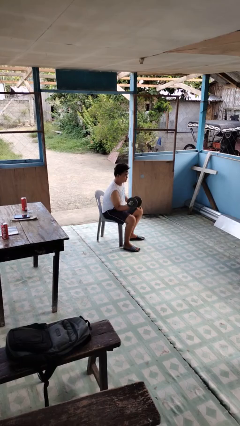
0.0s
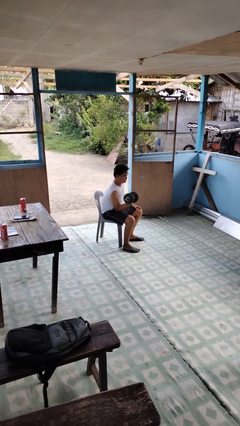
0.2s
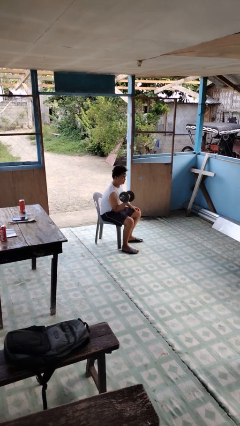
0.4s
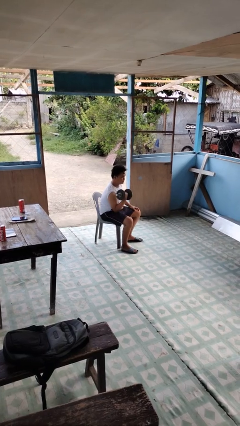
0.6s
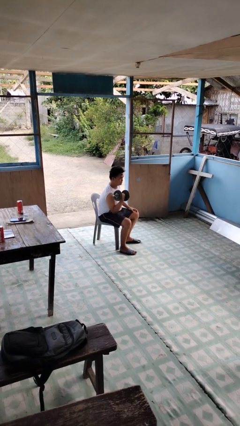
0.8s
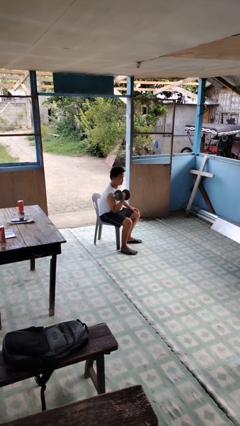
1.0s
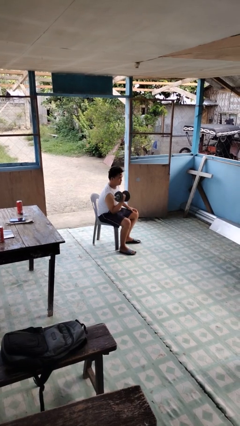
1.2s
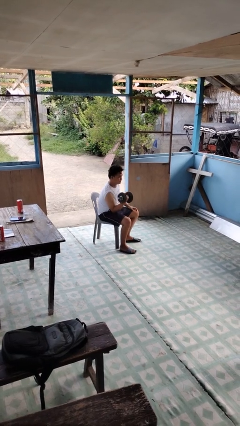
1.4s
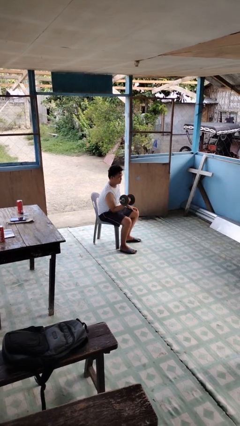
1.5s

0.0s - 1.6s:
person lifts dumbbells

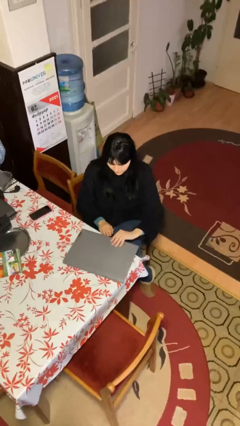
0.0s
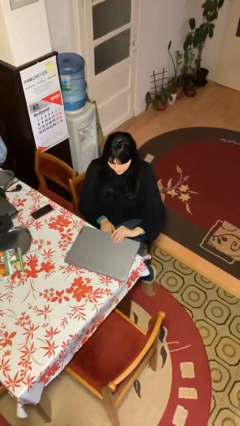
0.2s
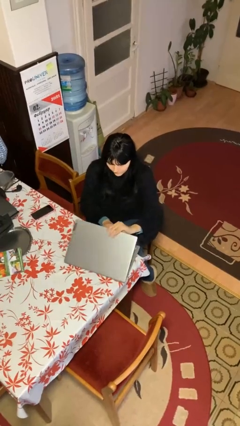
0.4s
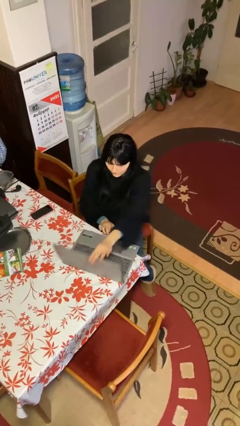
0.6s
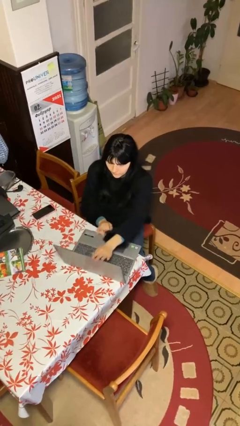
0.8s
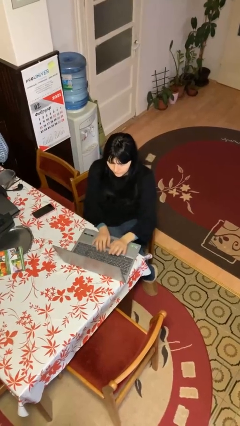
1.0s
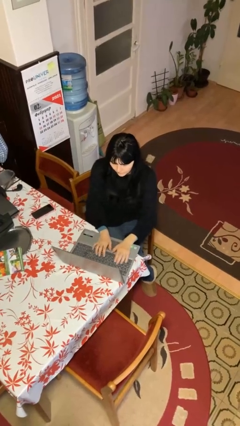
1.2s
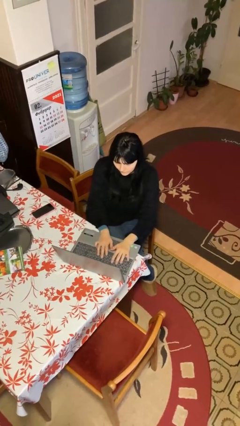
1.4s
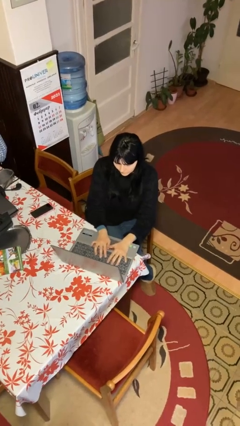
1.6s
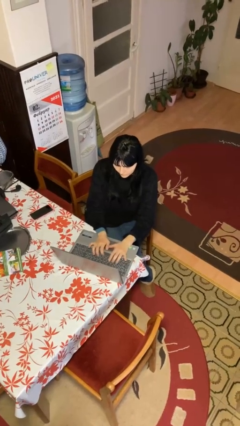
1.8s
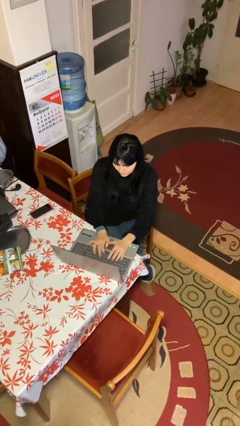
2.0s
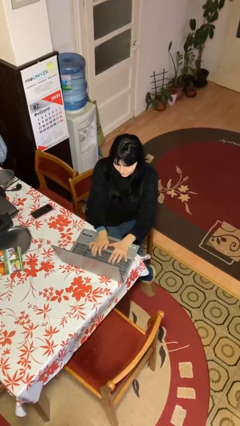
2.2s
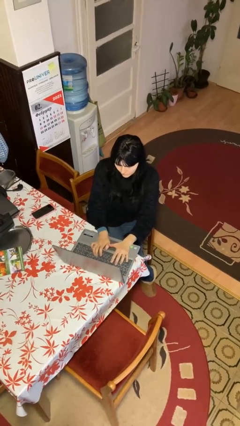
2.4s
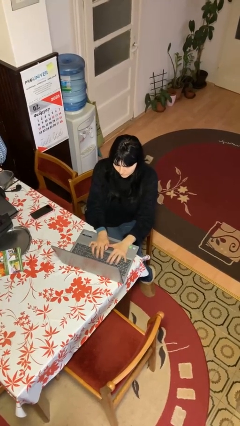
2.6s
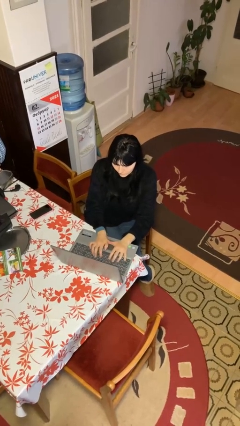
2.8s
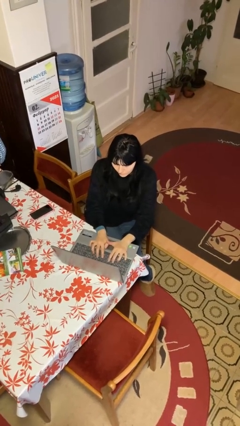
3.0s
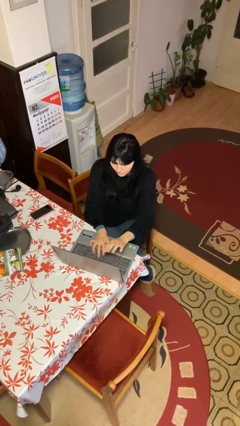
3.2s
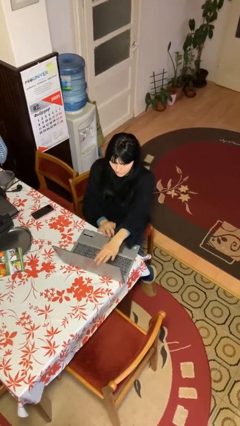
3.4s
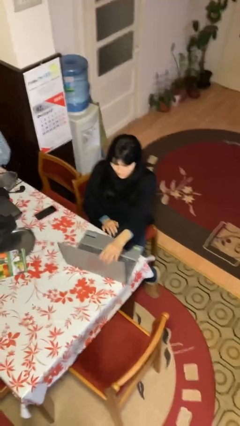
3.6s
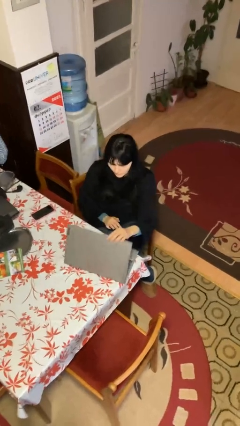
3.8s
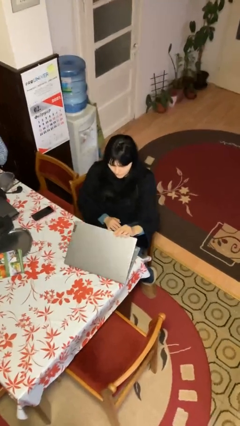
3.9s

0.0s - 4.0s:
person interacts with laptop

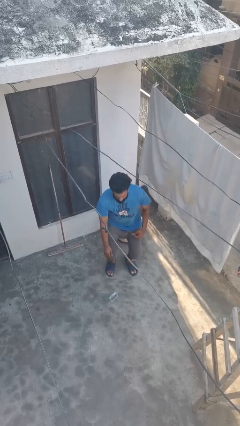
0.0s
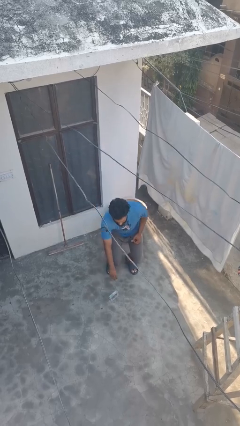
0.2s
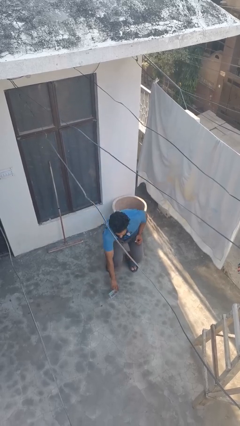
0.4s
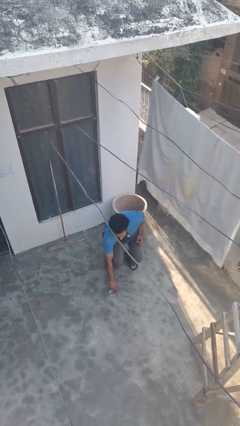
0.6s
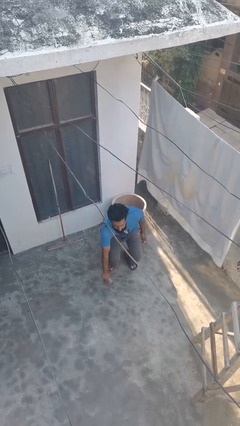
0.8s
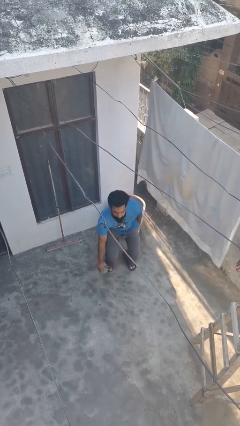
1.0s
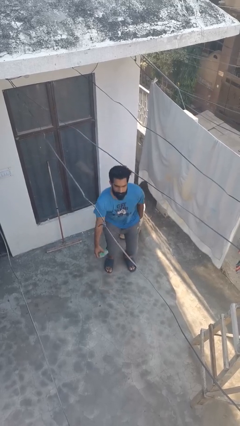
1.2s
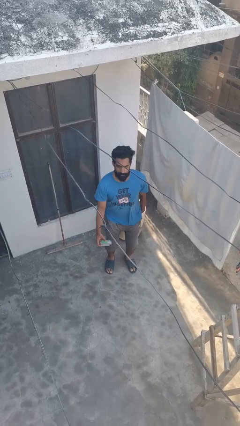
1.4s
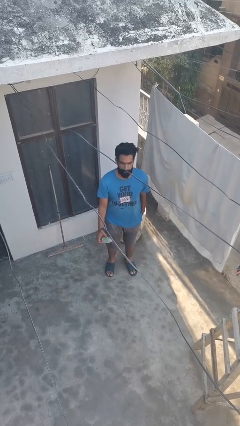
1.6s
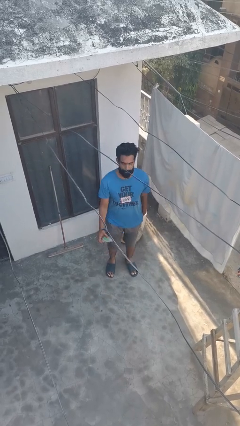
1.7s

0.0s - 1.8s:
person picks up object from floor

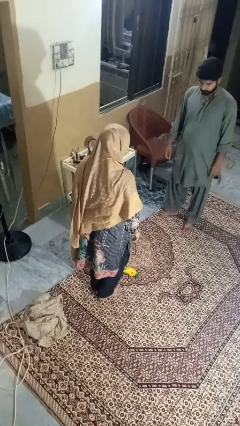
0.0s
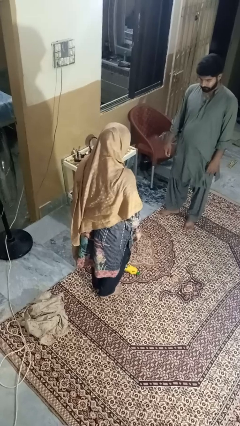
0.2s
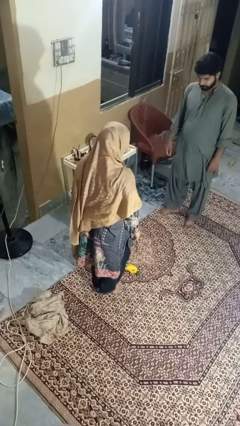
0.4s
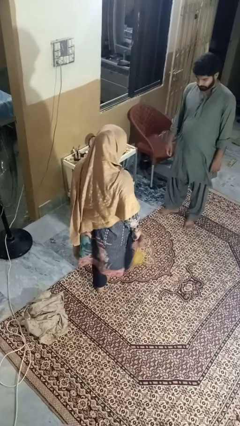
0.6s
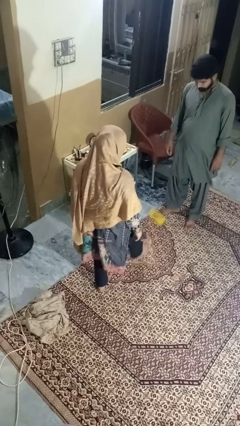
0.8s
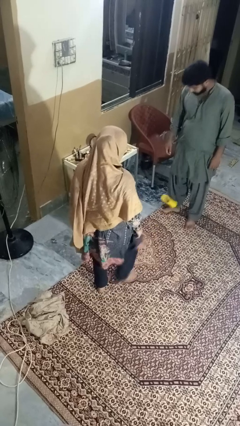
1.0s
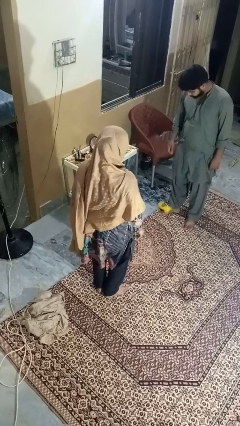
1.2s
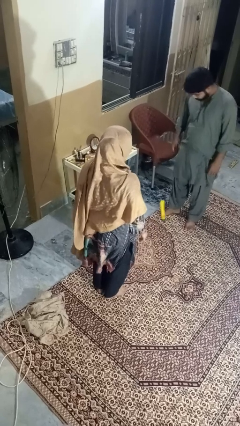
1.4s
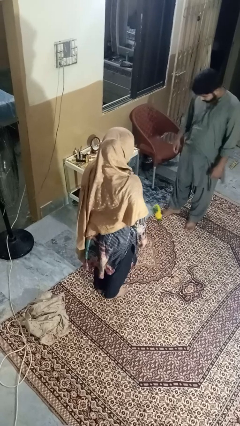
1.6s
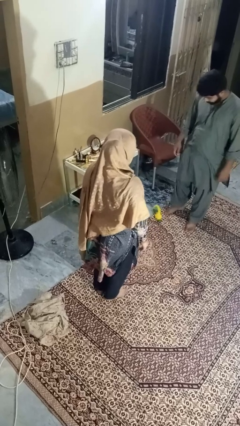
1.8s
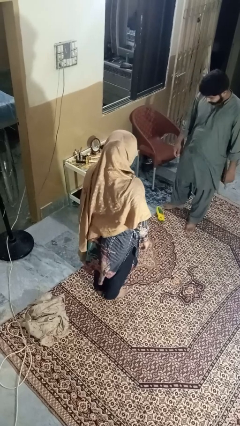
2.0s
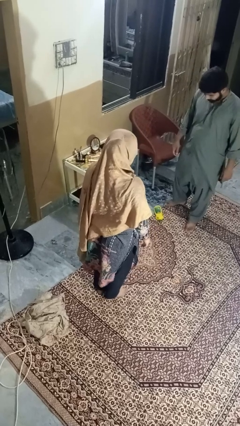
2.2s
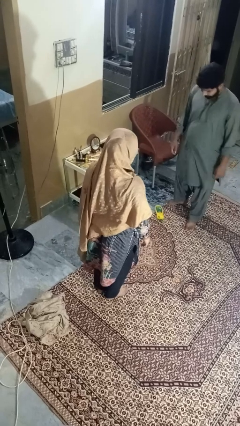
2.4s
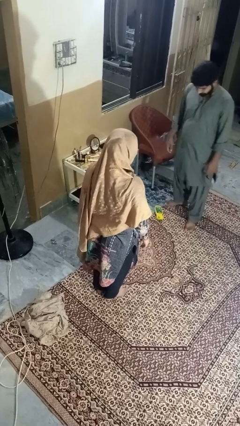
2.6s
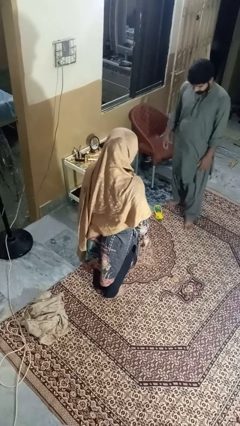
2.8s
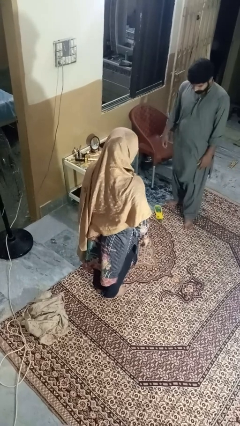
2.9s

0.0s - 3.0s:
person kicks object to person

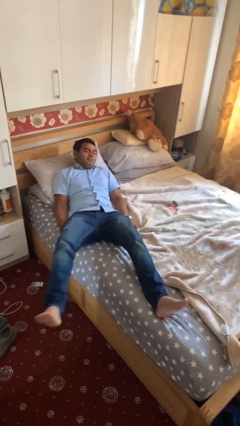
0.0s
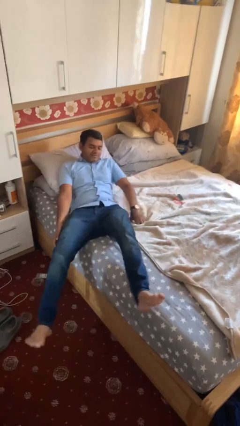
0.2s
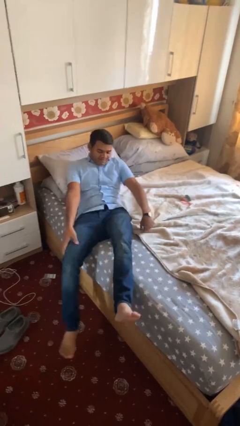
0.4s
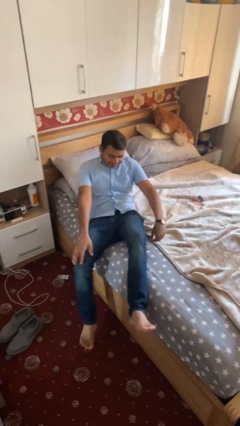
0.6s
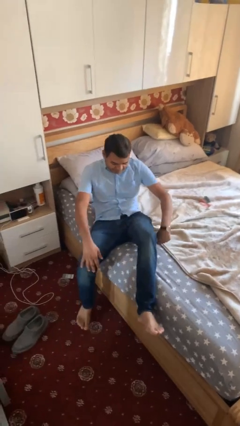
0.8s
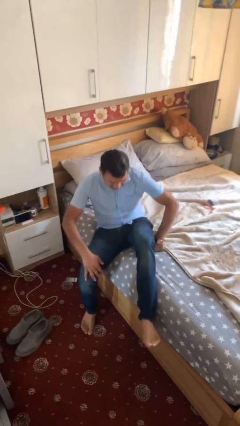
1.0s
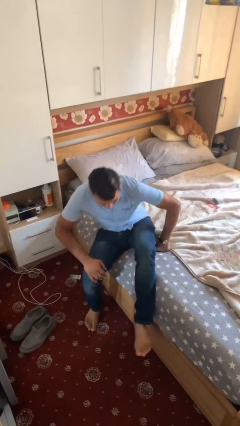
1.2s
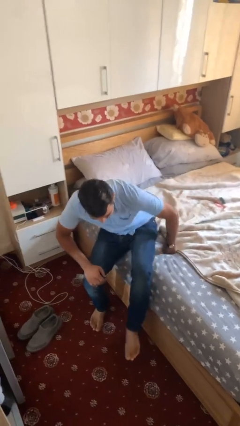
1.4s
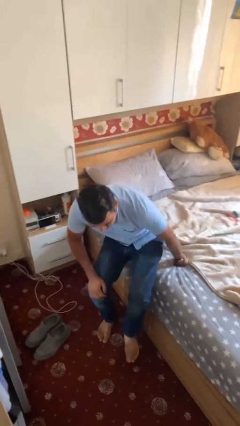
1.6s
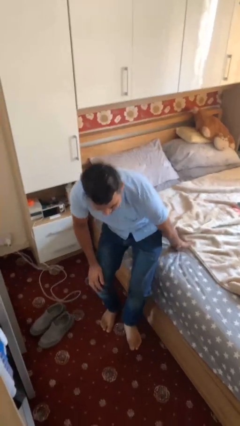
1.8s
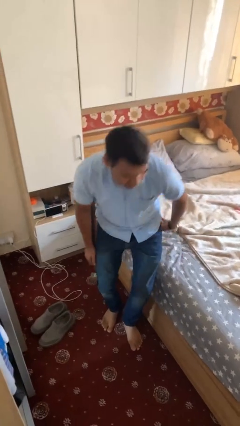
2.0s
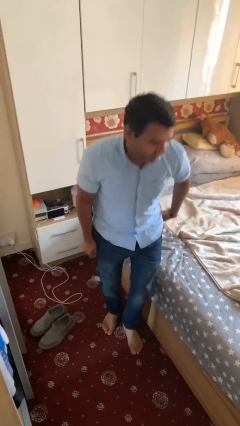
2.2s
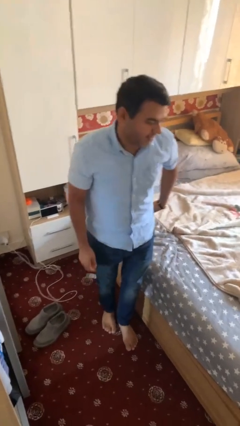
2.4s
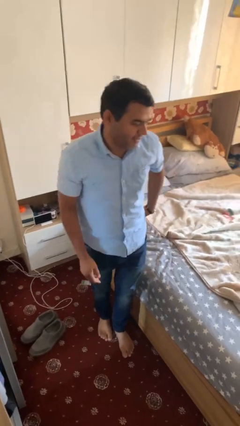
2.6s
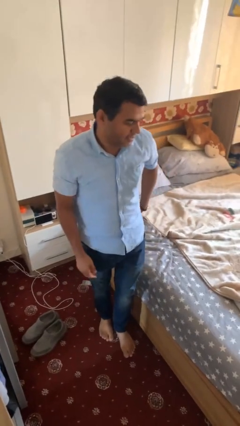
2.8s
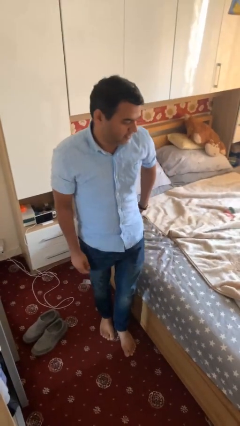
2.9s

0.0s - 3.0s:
person stands up

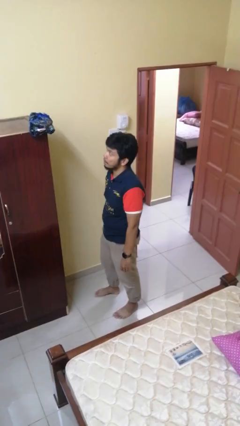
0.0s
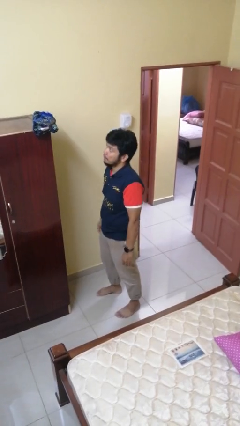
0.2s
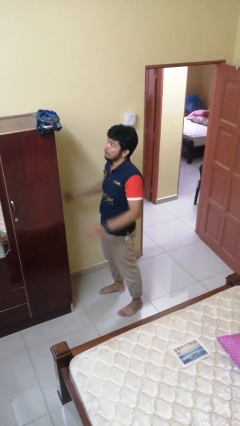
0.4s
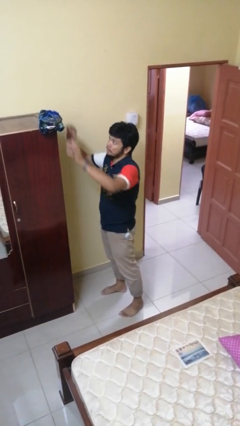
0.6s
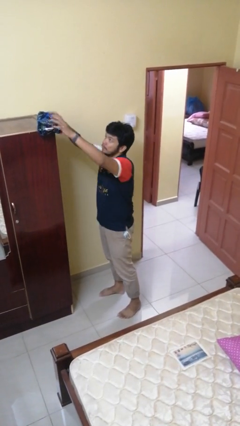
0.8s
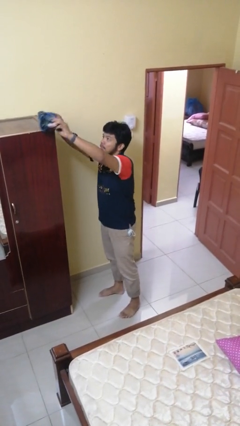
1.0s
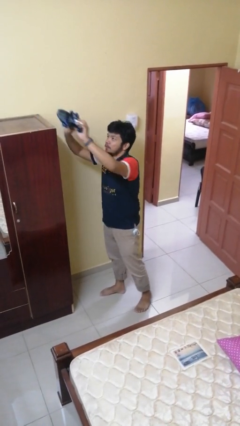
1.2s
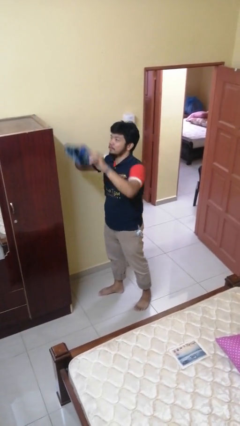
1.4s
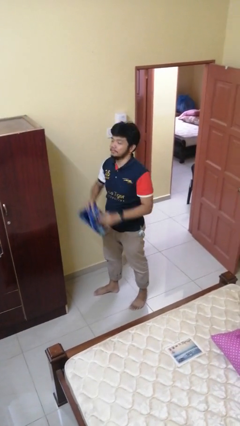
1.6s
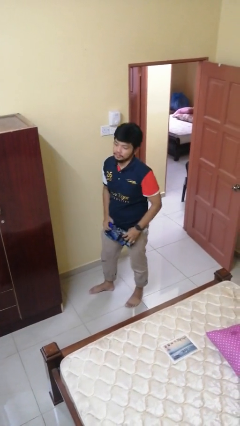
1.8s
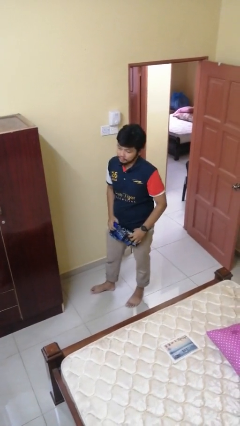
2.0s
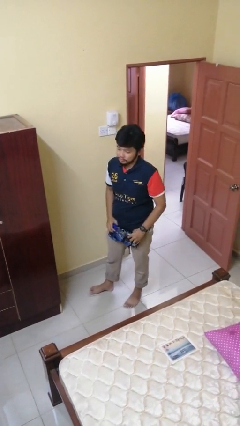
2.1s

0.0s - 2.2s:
person picks up object from countertop

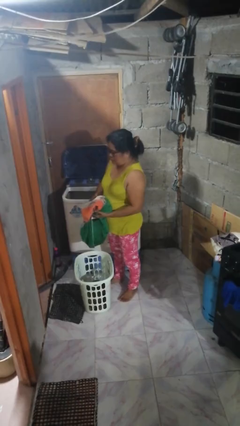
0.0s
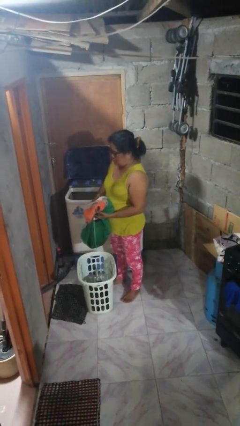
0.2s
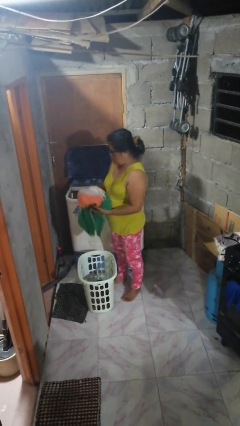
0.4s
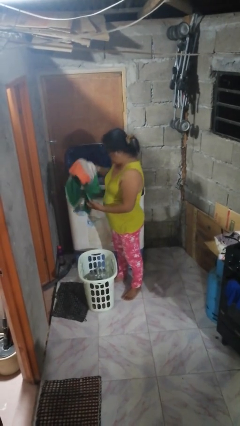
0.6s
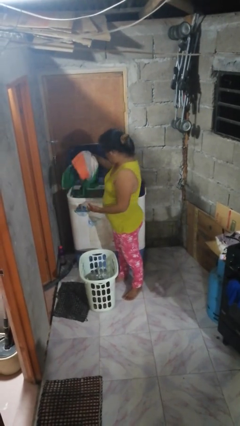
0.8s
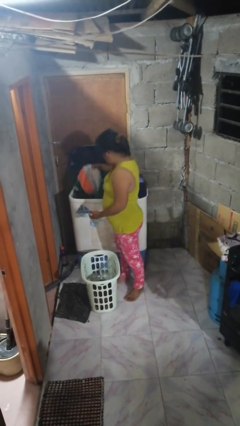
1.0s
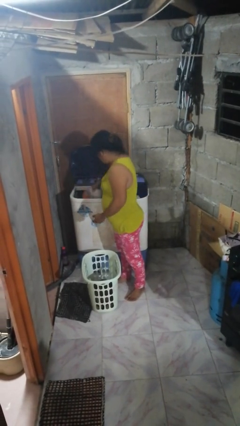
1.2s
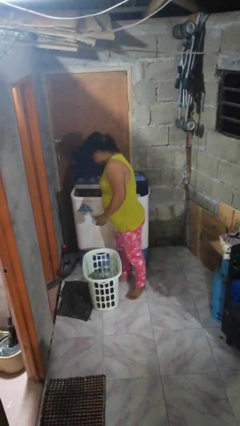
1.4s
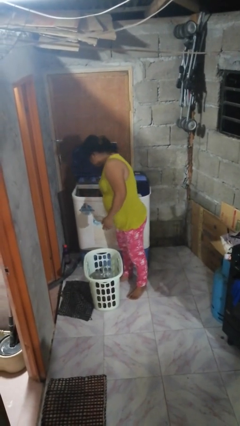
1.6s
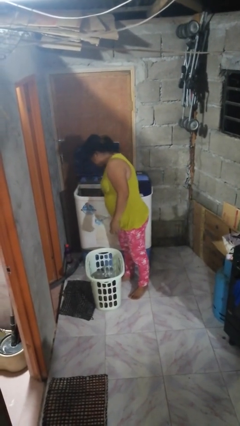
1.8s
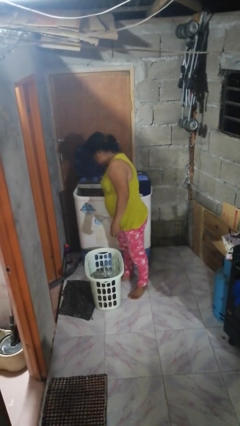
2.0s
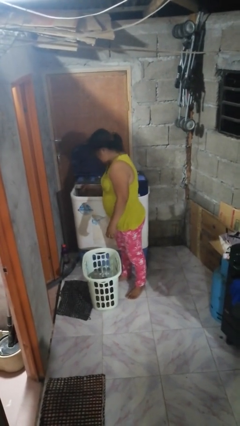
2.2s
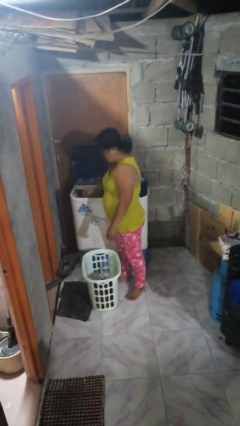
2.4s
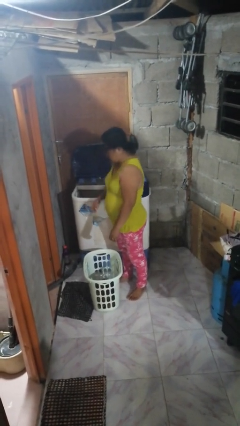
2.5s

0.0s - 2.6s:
person loads clotheswasher
